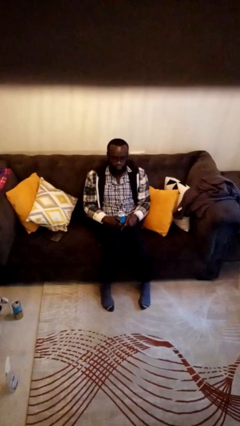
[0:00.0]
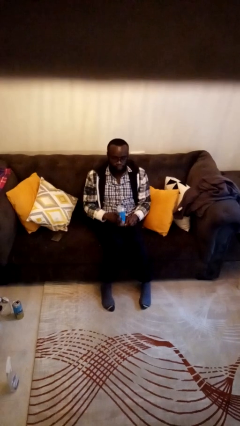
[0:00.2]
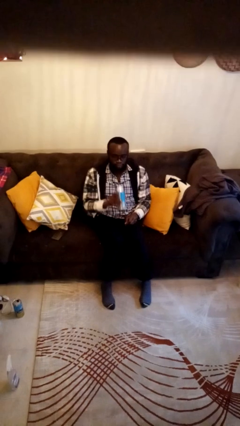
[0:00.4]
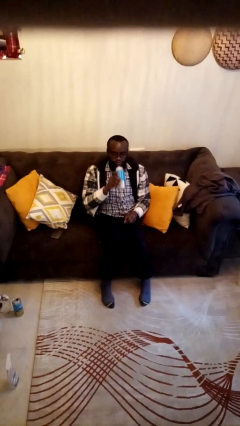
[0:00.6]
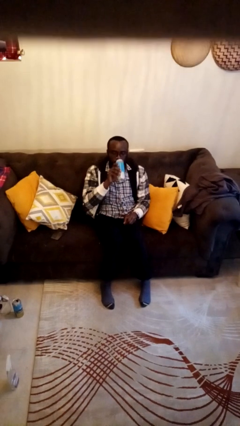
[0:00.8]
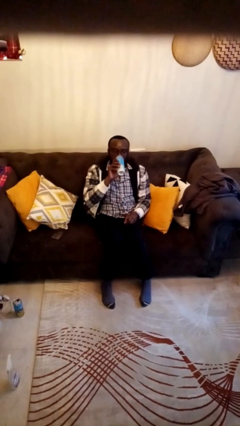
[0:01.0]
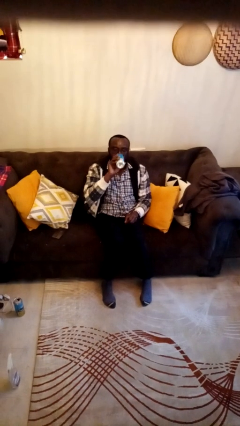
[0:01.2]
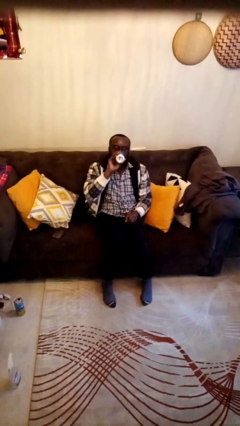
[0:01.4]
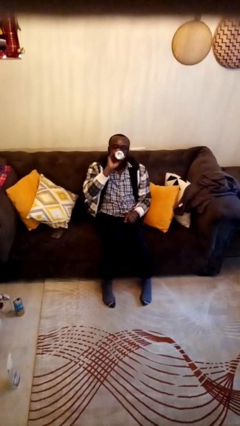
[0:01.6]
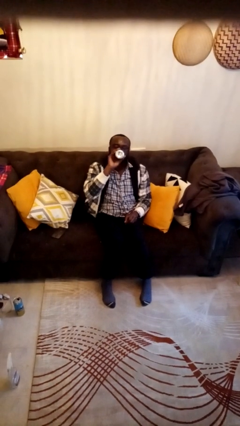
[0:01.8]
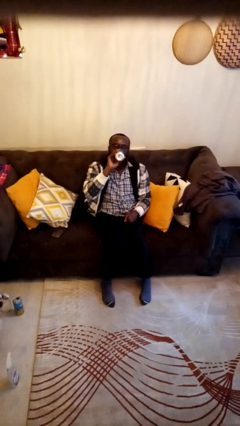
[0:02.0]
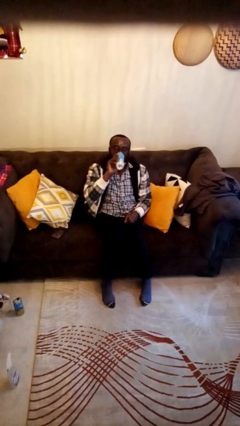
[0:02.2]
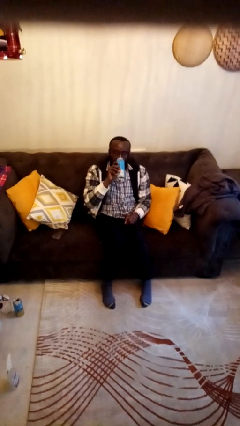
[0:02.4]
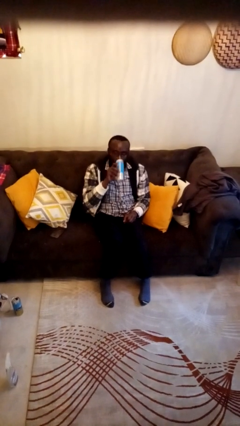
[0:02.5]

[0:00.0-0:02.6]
person drinks from beverage can

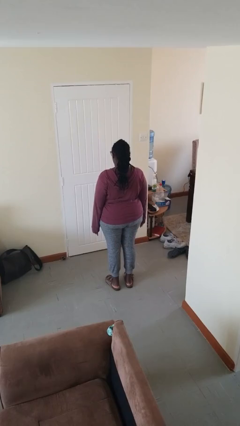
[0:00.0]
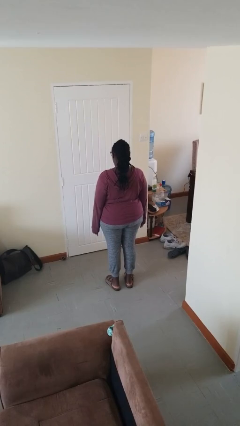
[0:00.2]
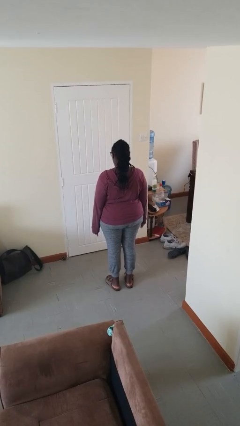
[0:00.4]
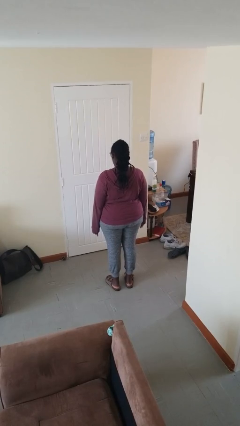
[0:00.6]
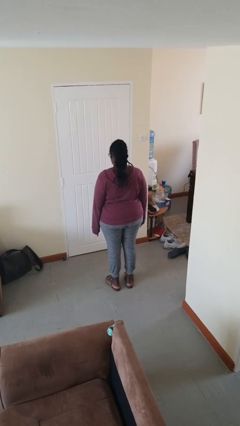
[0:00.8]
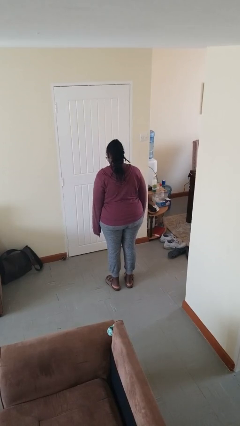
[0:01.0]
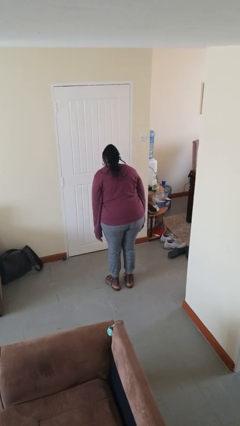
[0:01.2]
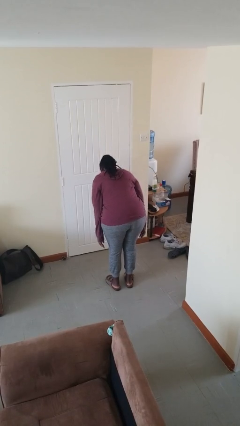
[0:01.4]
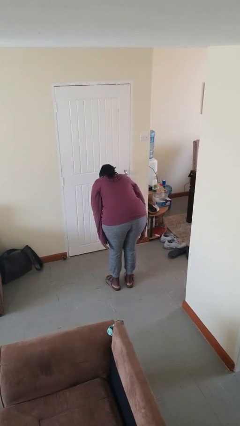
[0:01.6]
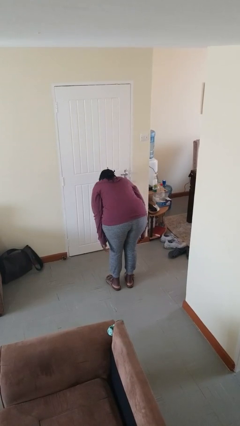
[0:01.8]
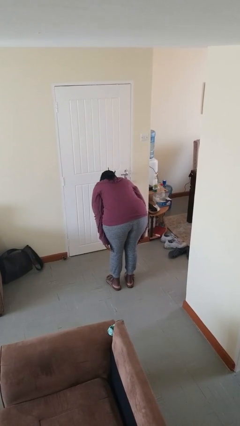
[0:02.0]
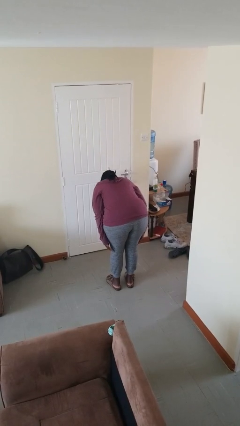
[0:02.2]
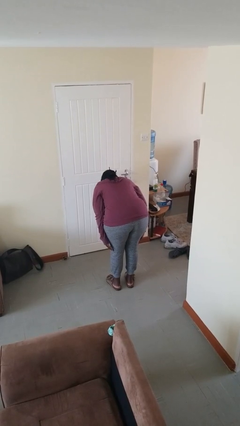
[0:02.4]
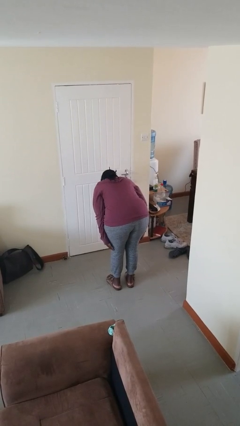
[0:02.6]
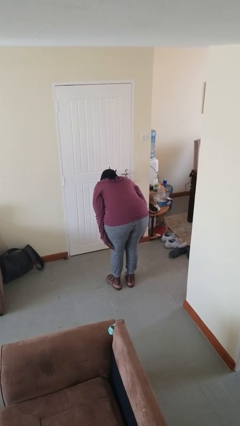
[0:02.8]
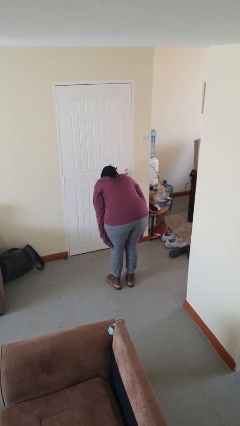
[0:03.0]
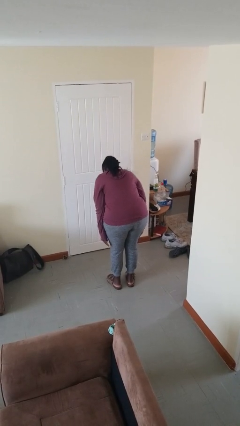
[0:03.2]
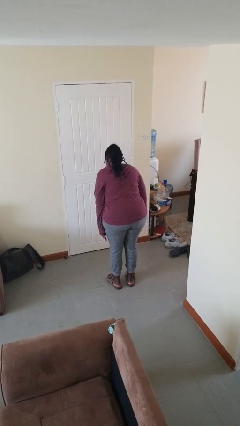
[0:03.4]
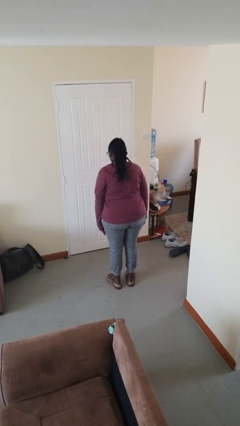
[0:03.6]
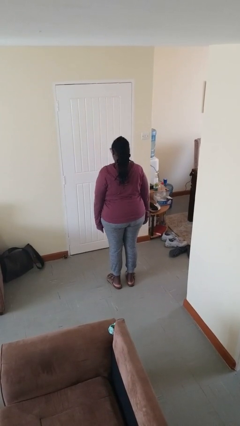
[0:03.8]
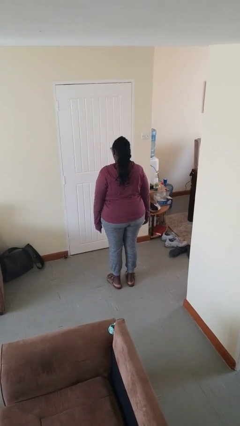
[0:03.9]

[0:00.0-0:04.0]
person bows

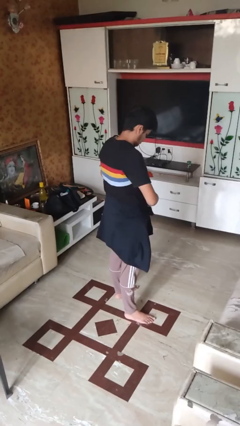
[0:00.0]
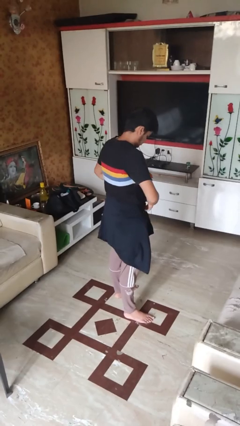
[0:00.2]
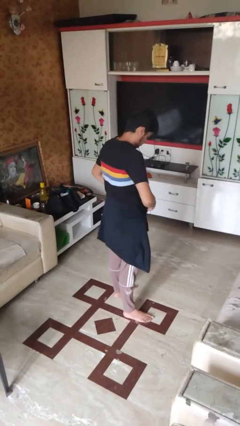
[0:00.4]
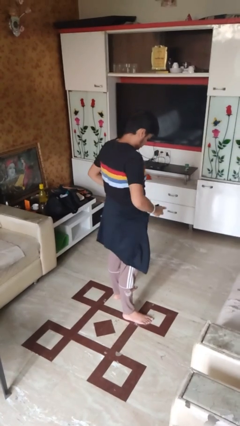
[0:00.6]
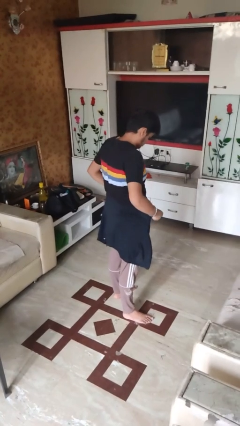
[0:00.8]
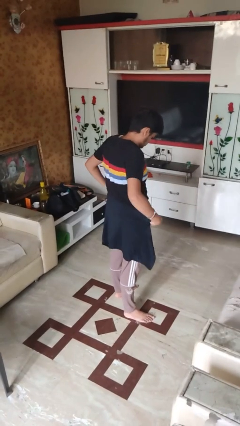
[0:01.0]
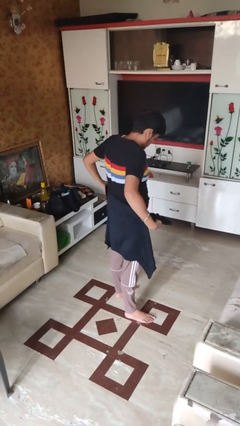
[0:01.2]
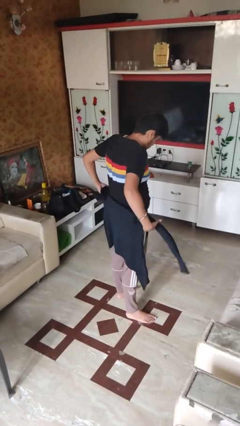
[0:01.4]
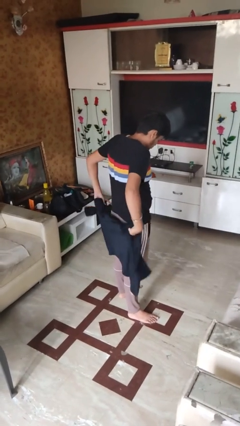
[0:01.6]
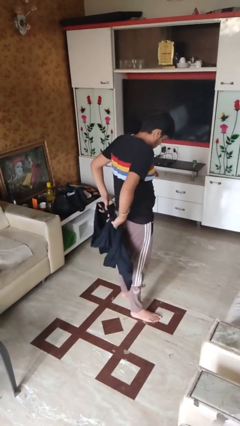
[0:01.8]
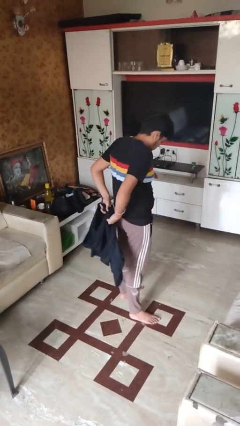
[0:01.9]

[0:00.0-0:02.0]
person unties jacket around waist

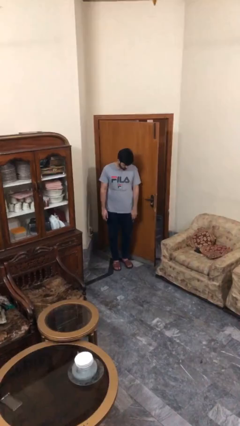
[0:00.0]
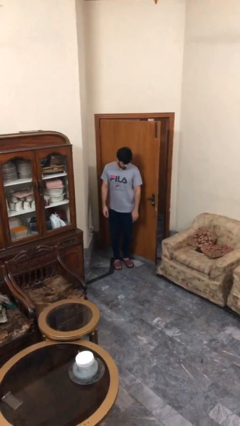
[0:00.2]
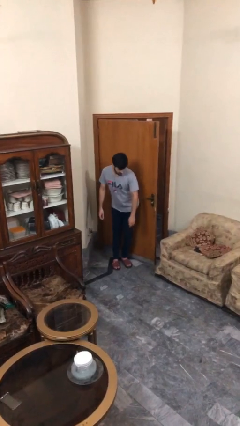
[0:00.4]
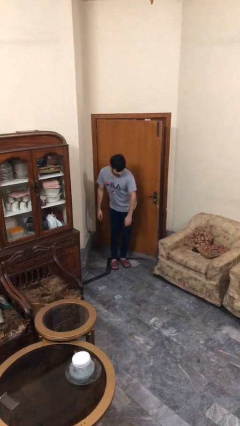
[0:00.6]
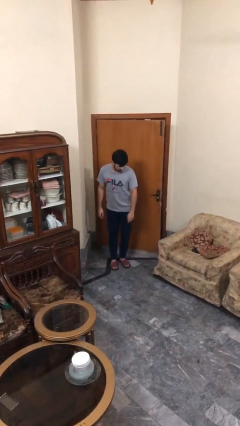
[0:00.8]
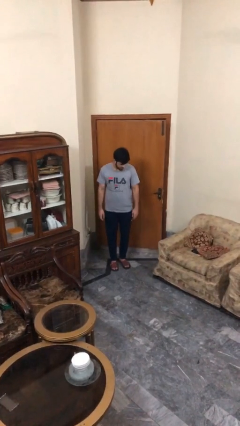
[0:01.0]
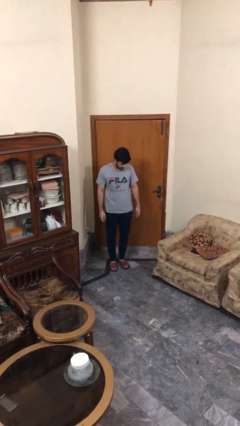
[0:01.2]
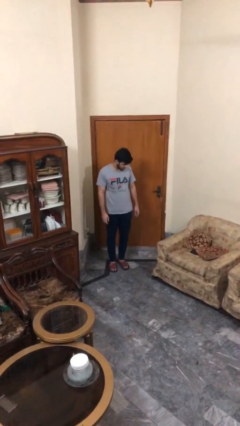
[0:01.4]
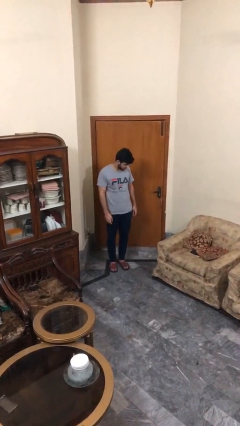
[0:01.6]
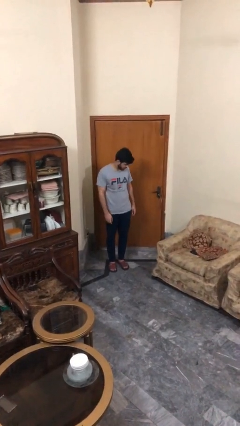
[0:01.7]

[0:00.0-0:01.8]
person closes door with hip

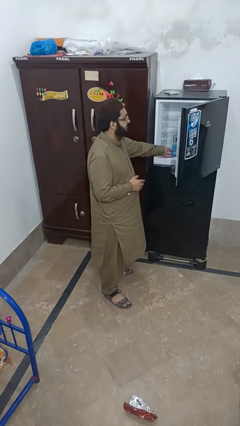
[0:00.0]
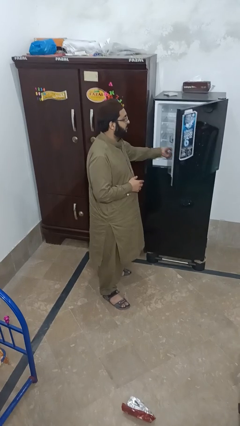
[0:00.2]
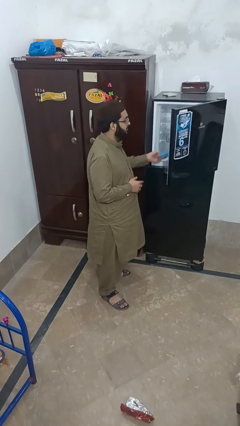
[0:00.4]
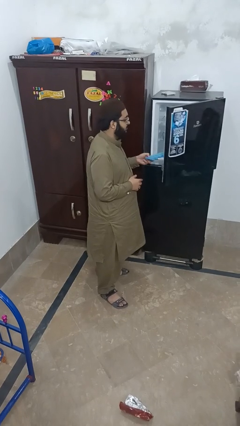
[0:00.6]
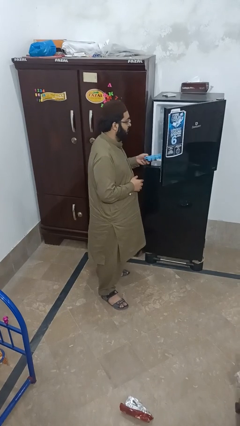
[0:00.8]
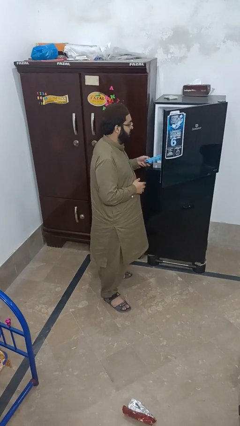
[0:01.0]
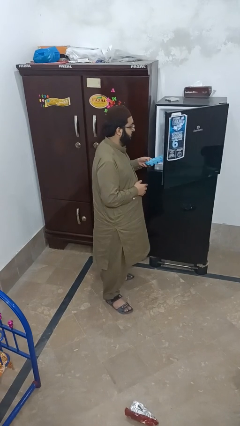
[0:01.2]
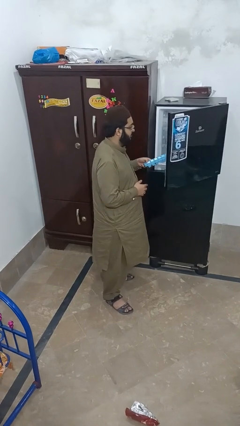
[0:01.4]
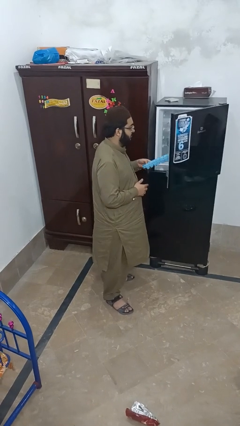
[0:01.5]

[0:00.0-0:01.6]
person takes object from refrigerator

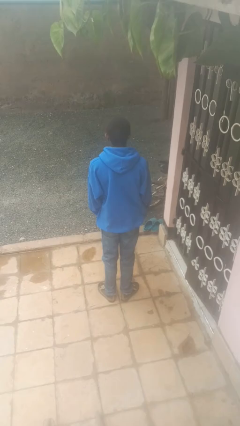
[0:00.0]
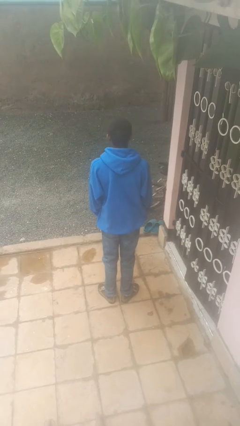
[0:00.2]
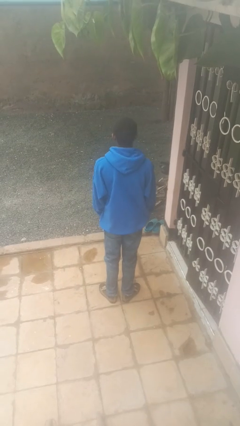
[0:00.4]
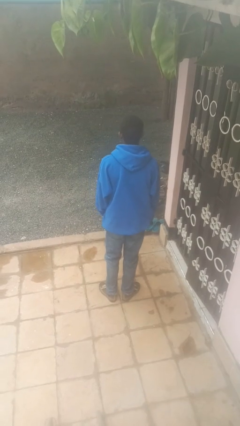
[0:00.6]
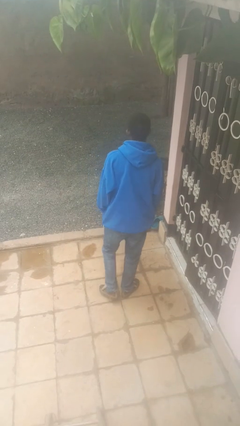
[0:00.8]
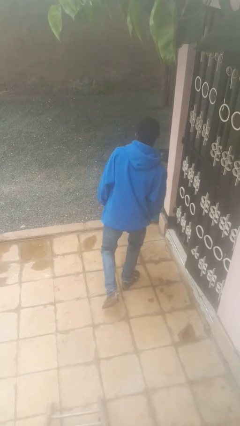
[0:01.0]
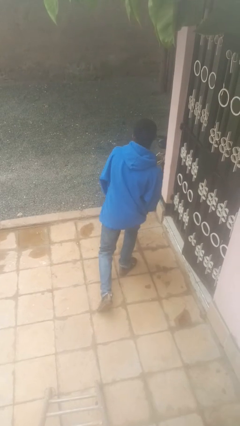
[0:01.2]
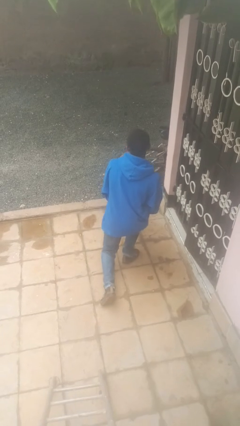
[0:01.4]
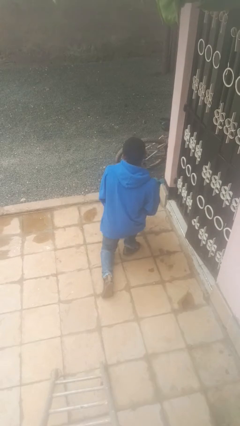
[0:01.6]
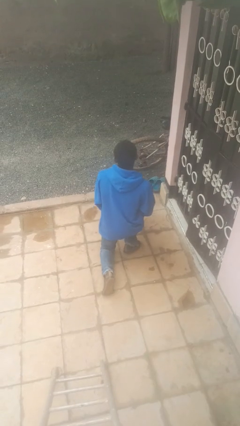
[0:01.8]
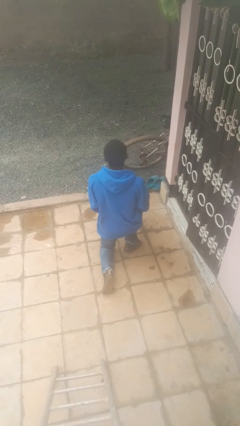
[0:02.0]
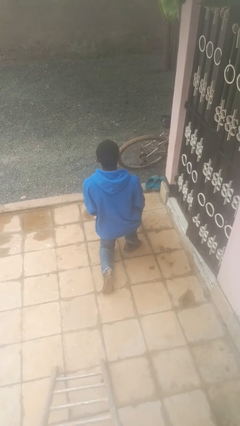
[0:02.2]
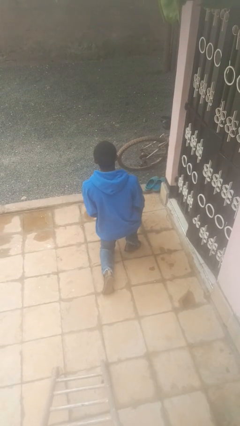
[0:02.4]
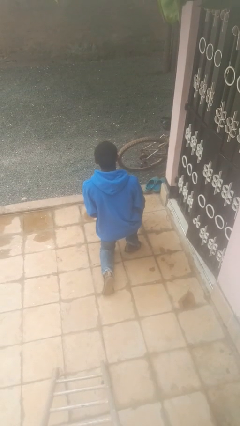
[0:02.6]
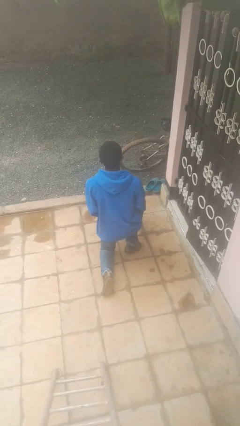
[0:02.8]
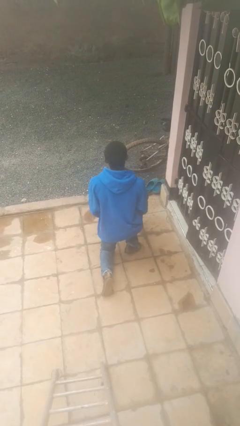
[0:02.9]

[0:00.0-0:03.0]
person kneels

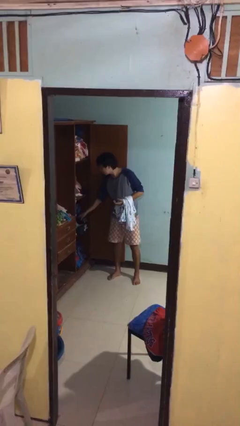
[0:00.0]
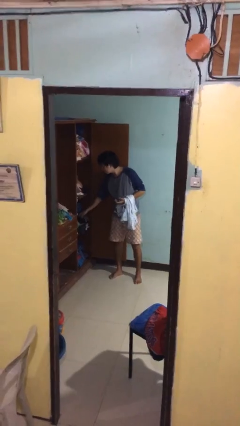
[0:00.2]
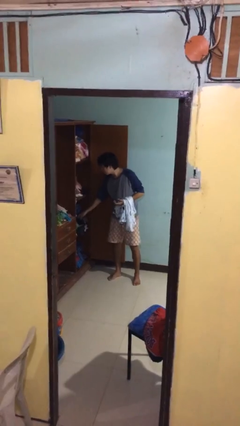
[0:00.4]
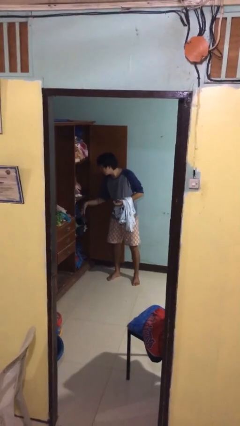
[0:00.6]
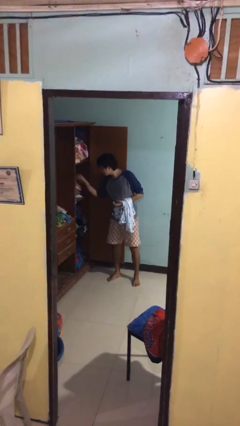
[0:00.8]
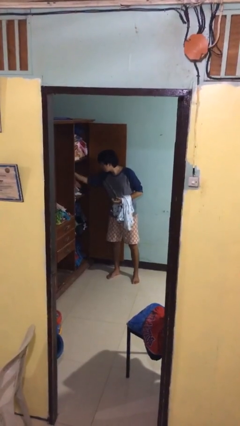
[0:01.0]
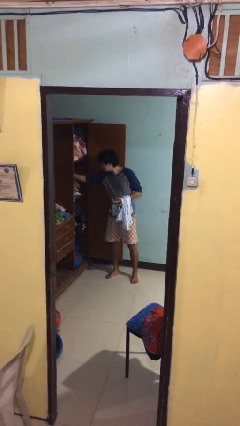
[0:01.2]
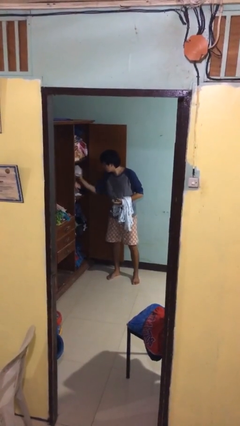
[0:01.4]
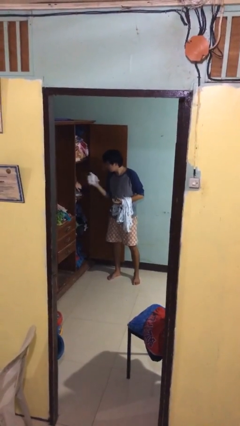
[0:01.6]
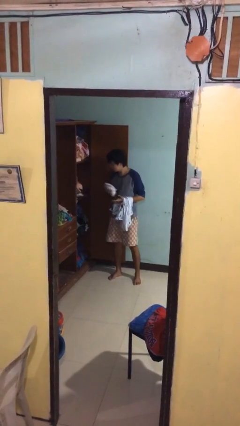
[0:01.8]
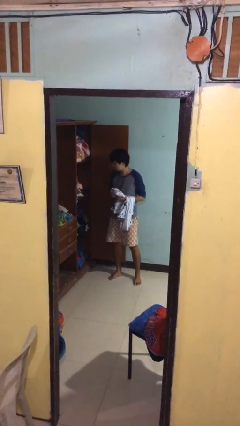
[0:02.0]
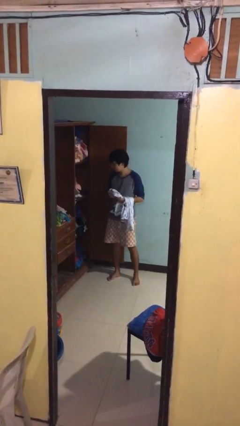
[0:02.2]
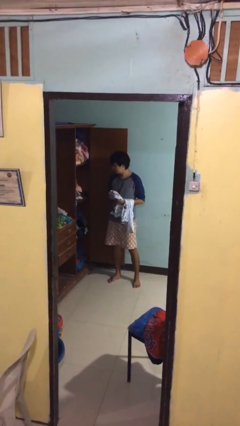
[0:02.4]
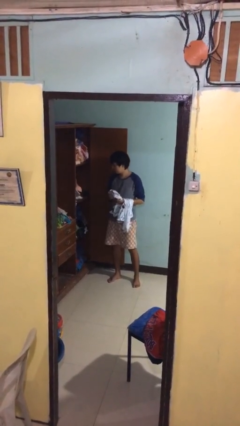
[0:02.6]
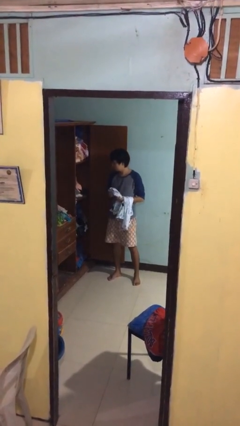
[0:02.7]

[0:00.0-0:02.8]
person takes clothes from dresser
